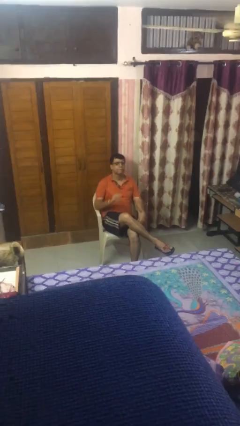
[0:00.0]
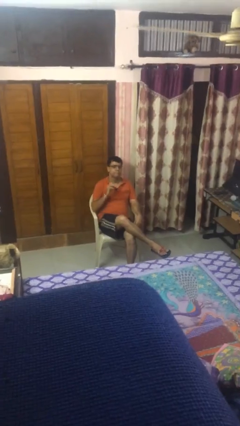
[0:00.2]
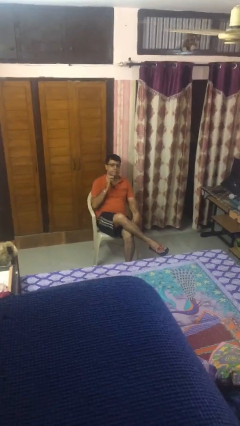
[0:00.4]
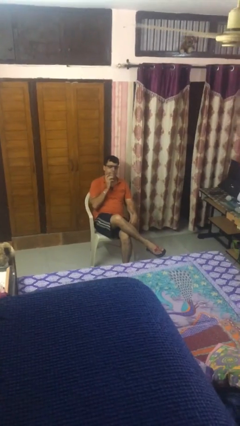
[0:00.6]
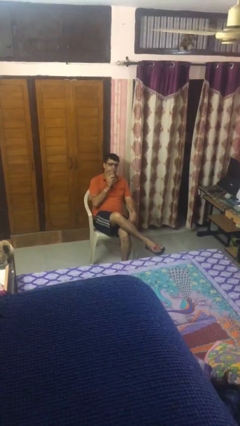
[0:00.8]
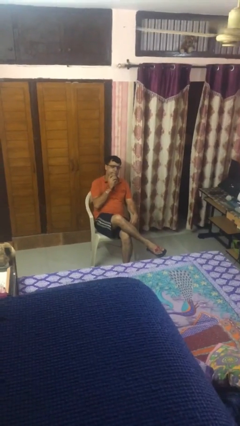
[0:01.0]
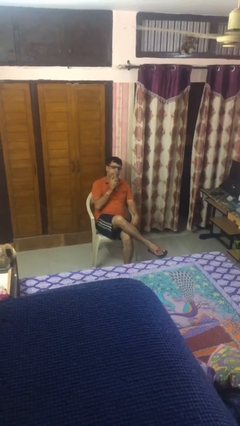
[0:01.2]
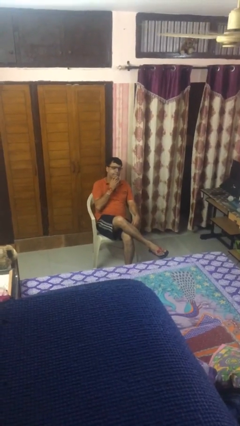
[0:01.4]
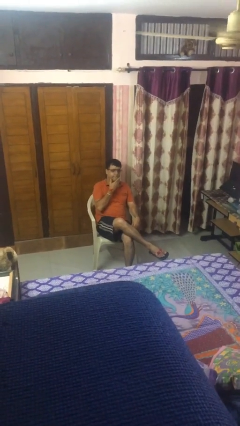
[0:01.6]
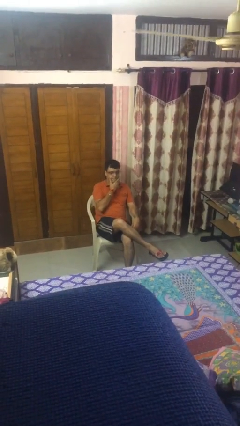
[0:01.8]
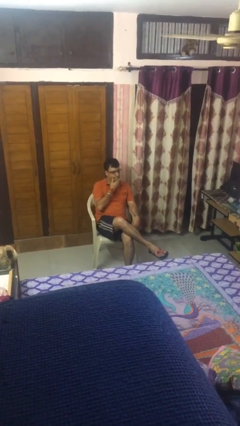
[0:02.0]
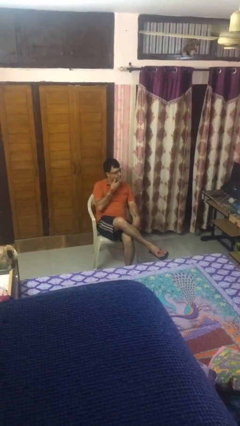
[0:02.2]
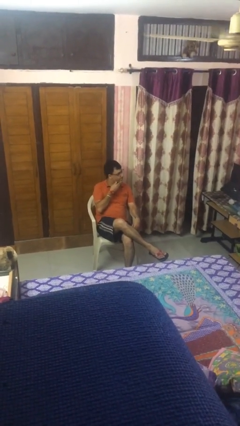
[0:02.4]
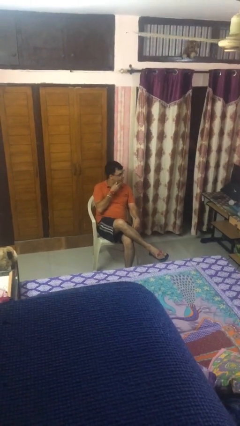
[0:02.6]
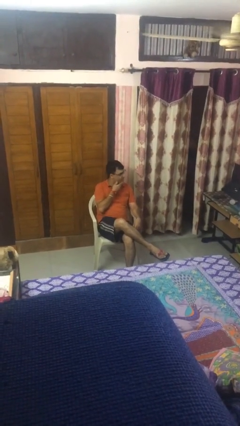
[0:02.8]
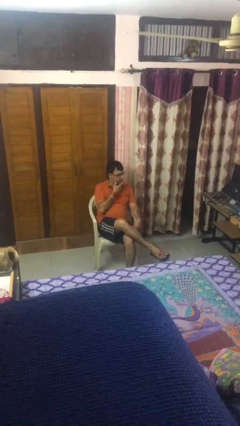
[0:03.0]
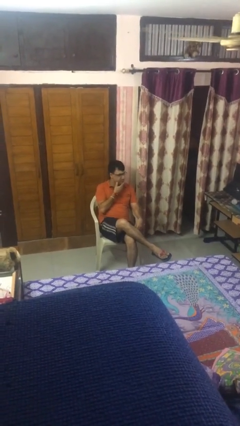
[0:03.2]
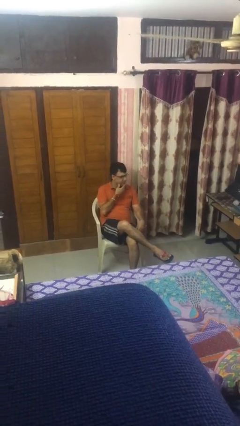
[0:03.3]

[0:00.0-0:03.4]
person strokes chin

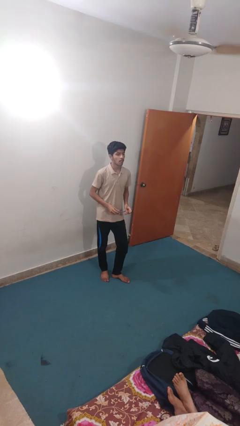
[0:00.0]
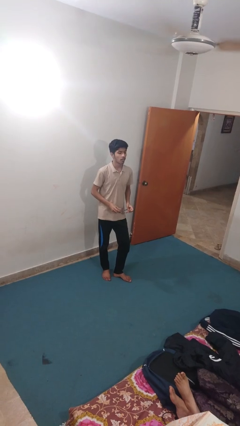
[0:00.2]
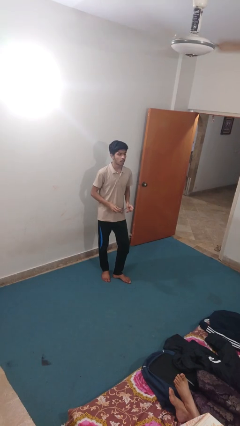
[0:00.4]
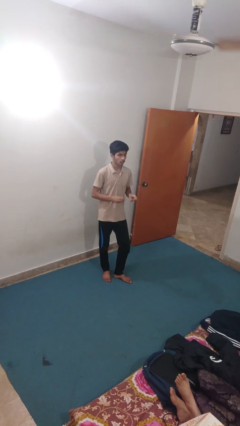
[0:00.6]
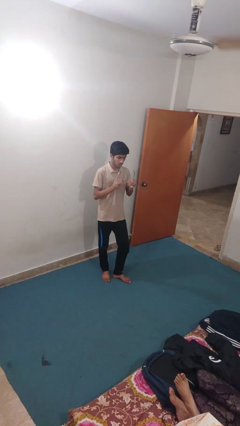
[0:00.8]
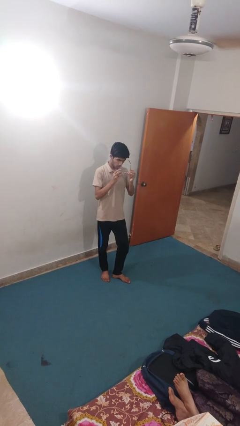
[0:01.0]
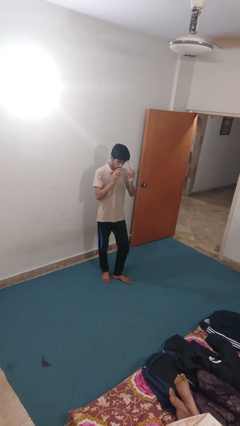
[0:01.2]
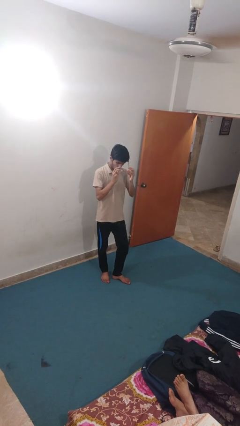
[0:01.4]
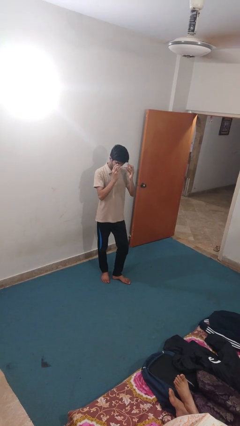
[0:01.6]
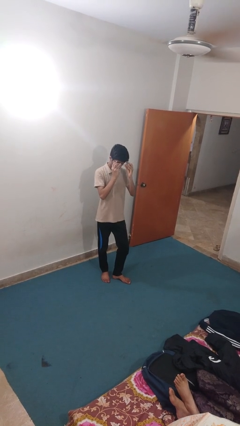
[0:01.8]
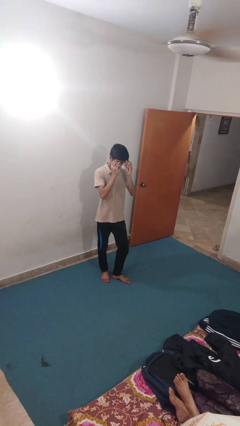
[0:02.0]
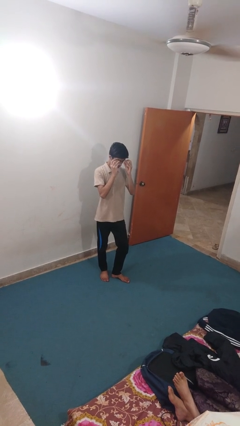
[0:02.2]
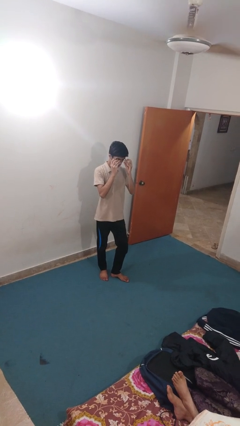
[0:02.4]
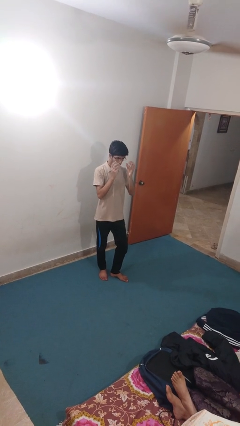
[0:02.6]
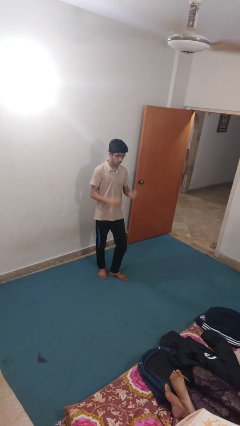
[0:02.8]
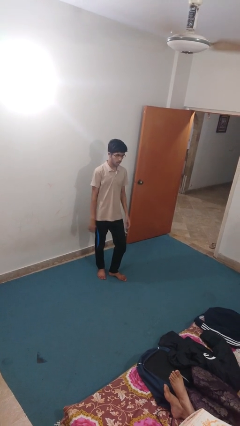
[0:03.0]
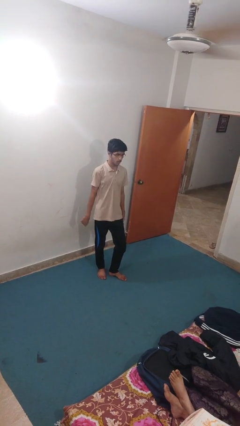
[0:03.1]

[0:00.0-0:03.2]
person puts on glasses

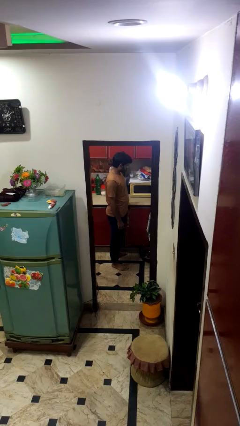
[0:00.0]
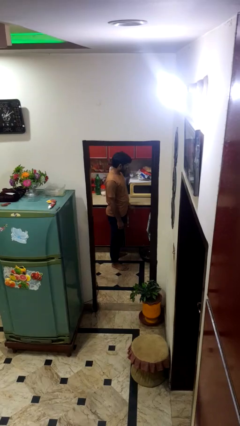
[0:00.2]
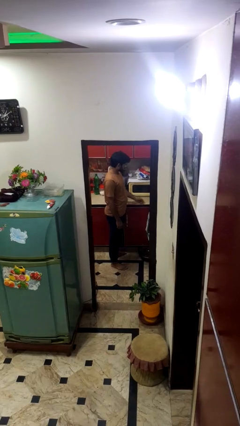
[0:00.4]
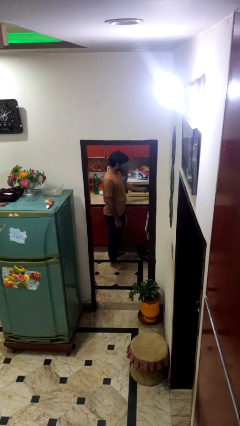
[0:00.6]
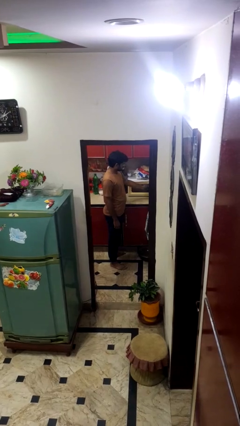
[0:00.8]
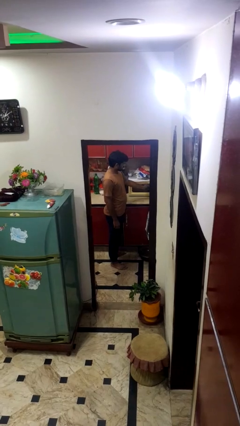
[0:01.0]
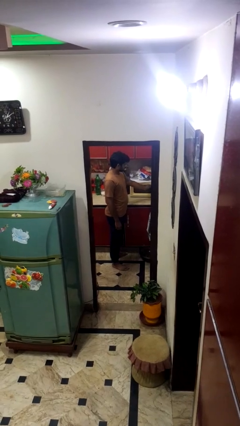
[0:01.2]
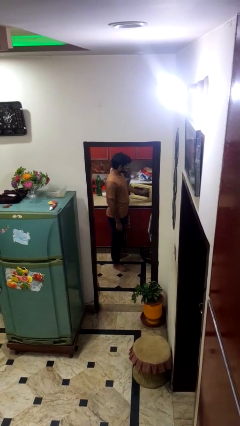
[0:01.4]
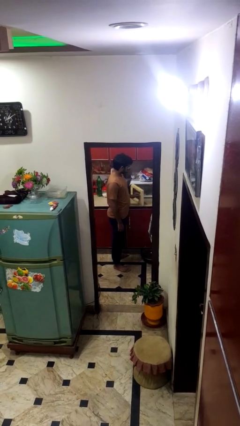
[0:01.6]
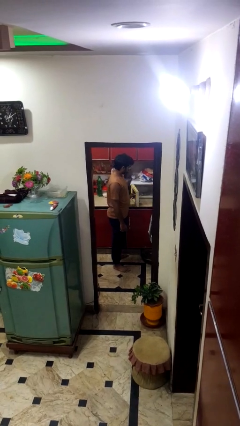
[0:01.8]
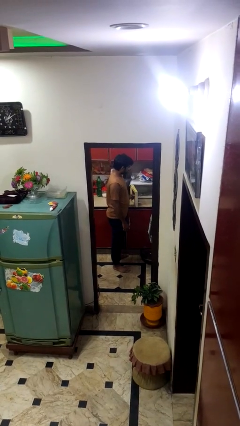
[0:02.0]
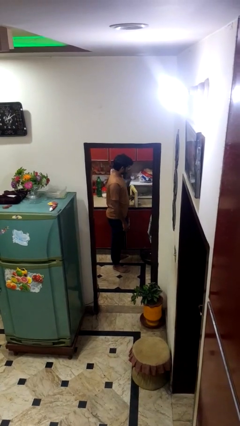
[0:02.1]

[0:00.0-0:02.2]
person opens microwave

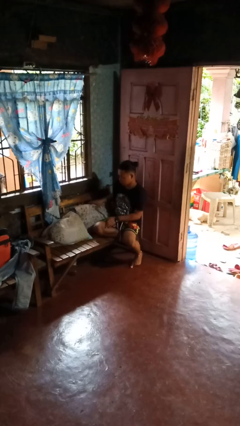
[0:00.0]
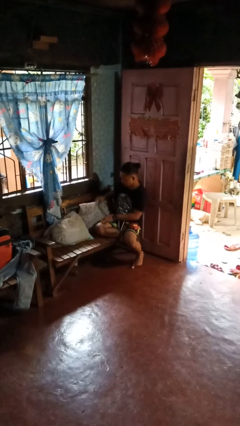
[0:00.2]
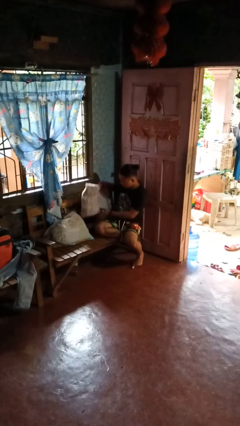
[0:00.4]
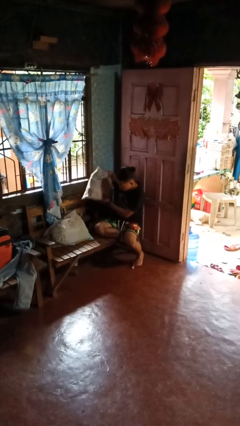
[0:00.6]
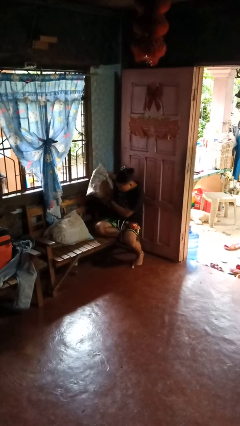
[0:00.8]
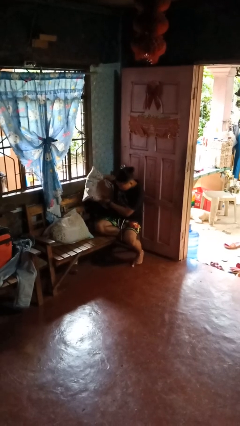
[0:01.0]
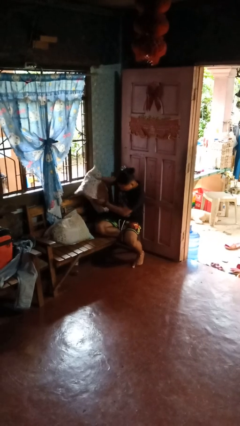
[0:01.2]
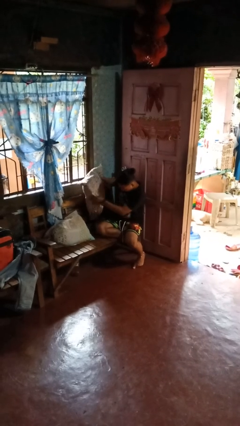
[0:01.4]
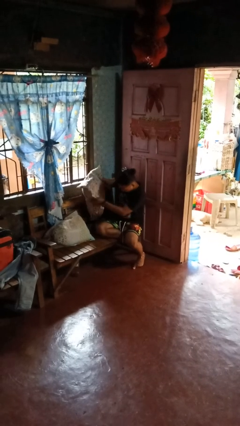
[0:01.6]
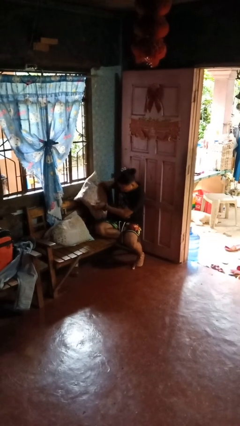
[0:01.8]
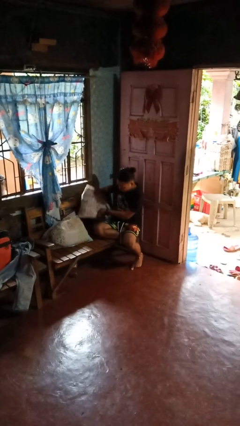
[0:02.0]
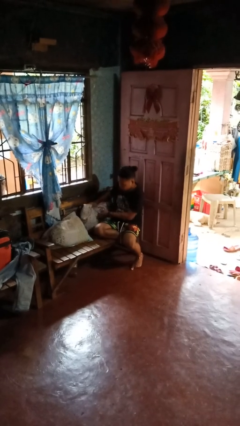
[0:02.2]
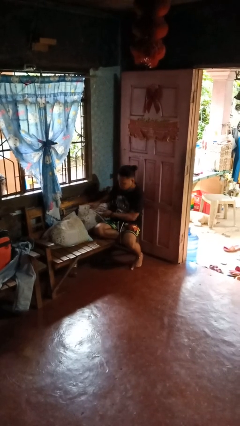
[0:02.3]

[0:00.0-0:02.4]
person searches in couch

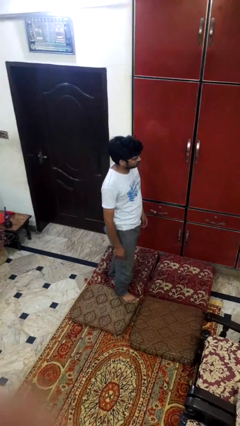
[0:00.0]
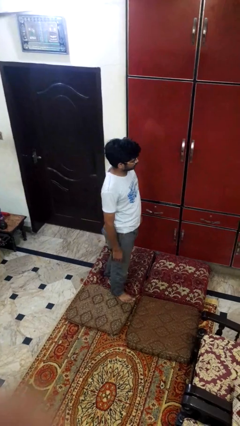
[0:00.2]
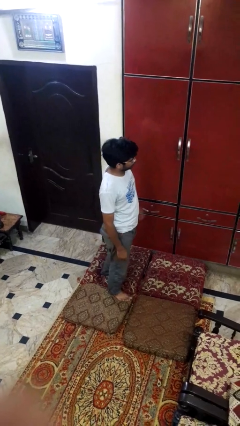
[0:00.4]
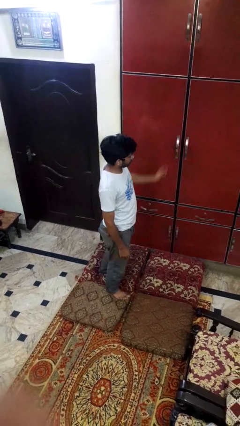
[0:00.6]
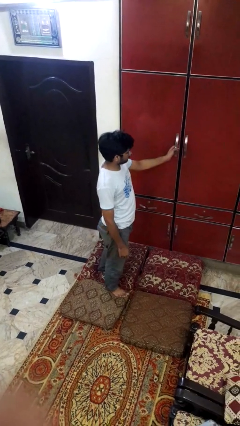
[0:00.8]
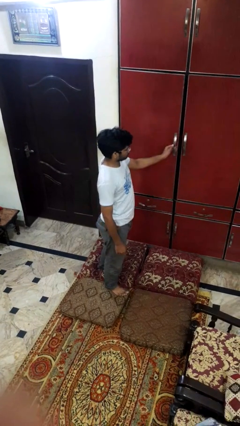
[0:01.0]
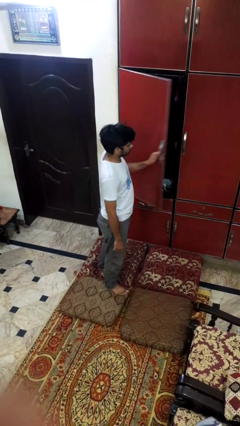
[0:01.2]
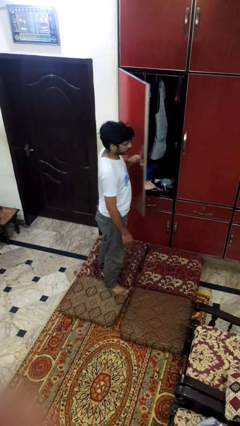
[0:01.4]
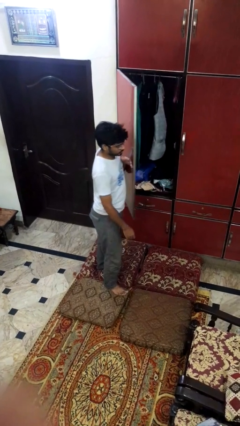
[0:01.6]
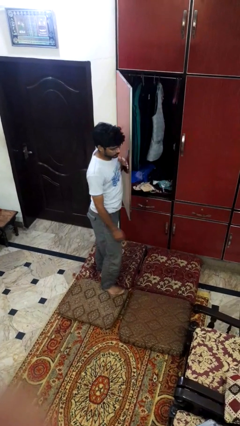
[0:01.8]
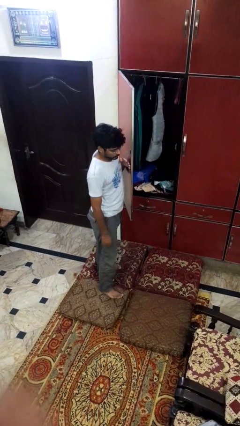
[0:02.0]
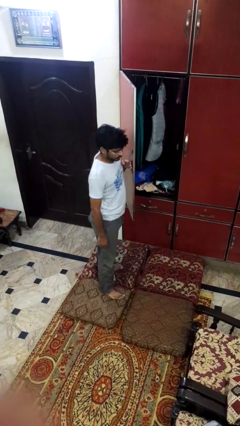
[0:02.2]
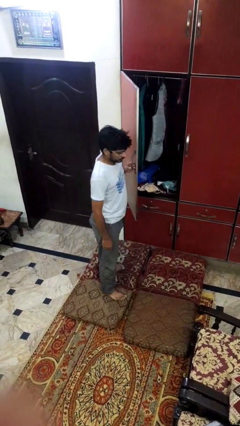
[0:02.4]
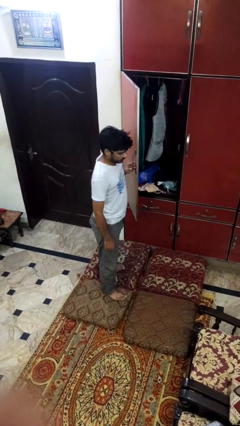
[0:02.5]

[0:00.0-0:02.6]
person opens closet door

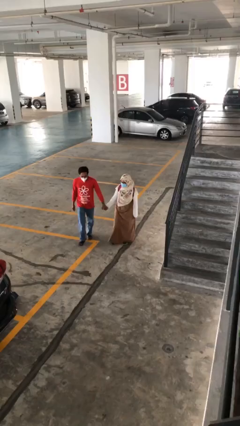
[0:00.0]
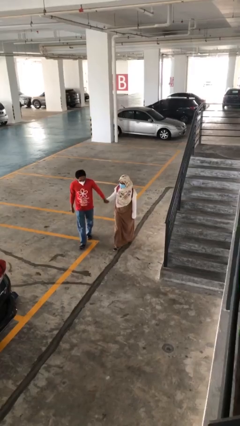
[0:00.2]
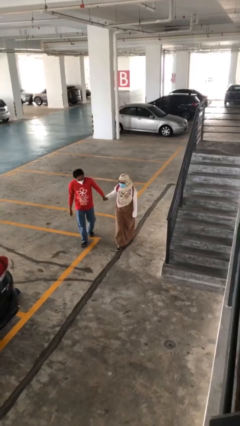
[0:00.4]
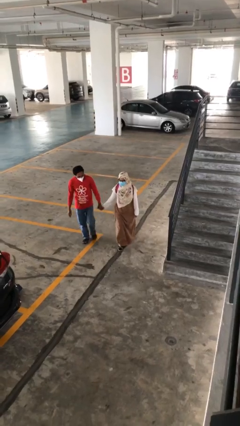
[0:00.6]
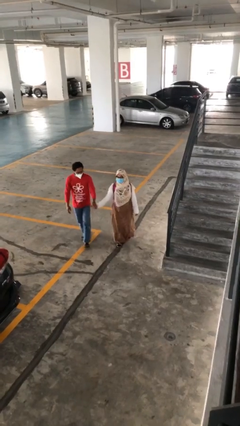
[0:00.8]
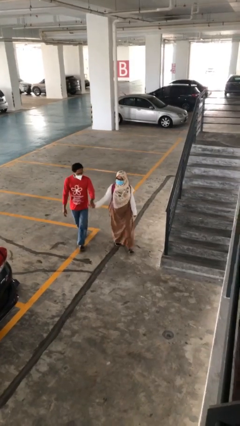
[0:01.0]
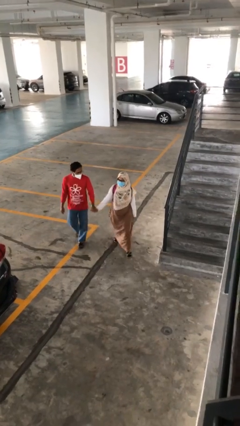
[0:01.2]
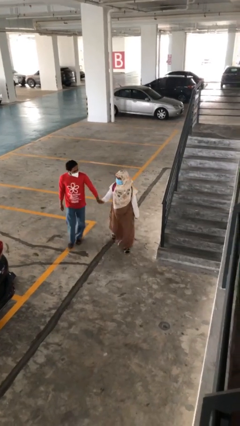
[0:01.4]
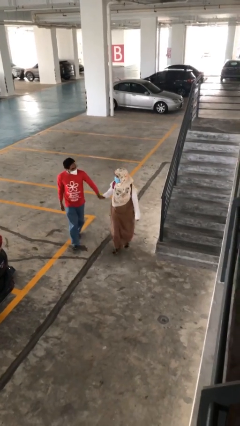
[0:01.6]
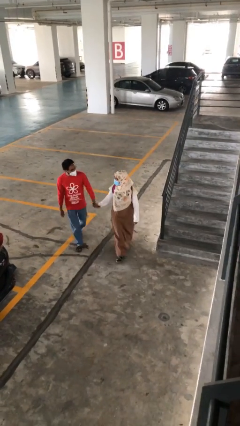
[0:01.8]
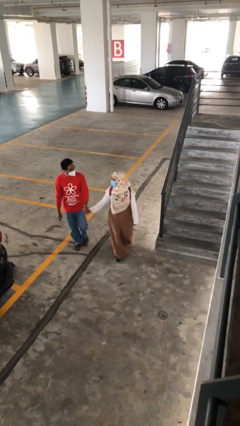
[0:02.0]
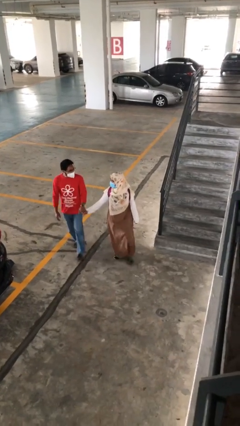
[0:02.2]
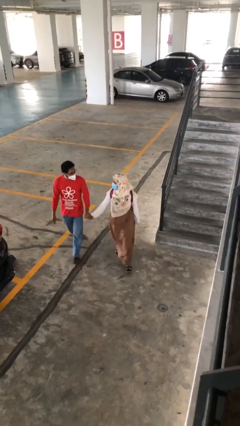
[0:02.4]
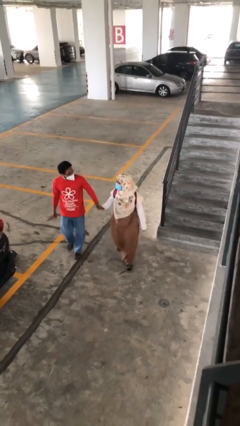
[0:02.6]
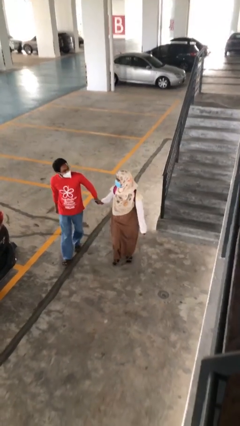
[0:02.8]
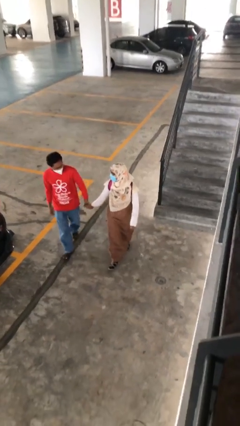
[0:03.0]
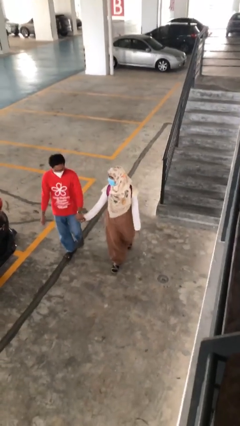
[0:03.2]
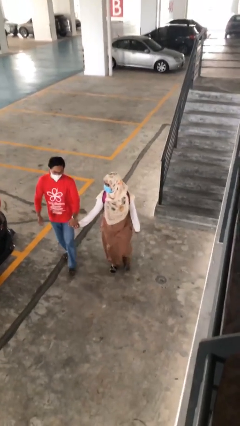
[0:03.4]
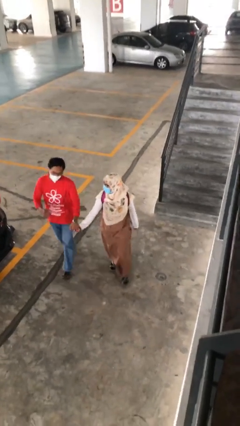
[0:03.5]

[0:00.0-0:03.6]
person holds hand

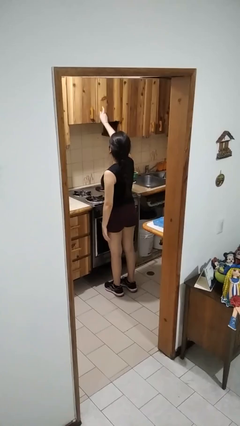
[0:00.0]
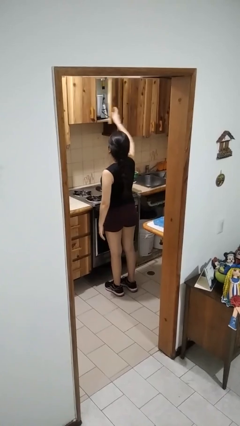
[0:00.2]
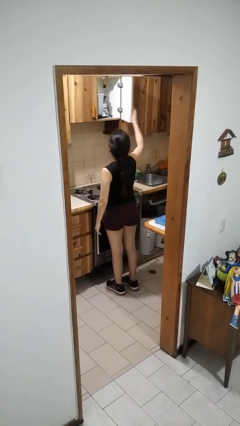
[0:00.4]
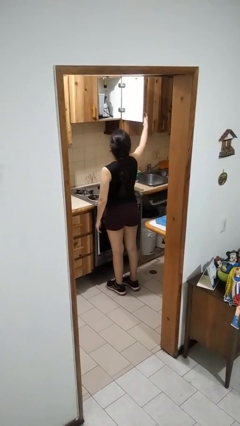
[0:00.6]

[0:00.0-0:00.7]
person opens cabinet
